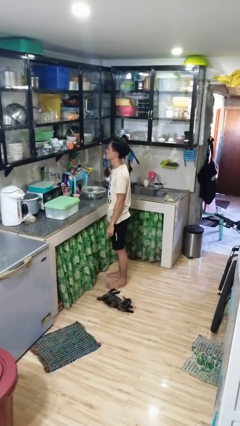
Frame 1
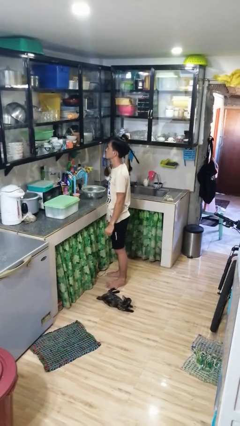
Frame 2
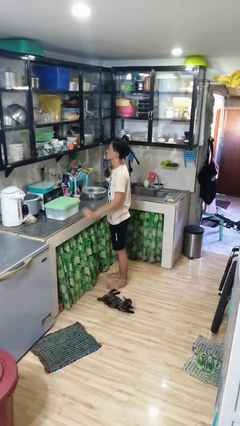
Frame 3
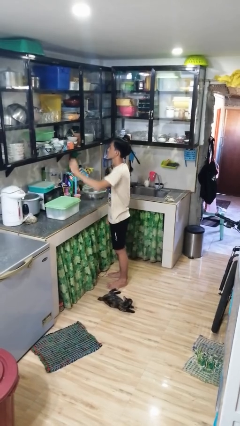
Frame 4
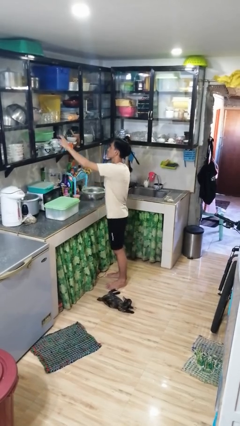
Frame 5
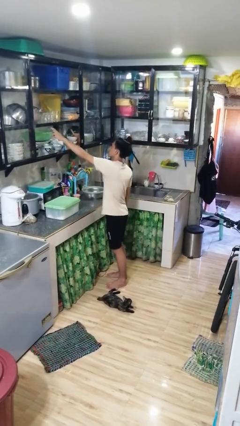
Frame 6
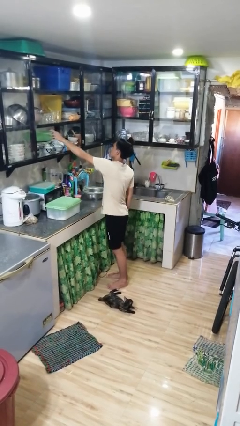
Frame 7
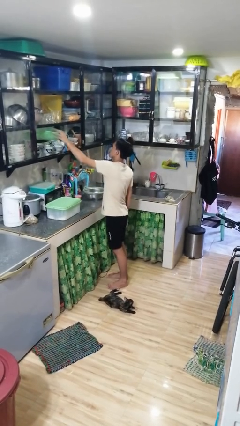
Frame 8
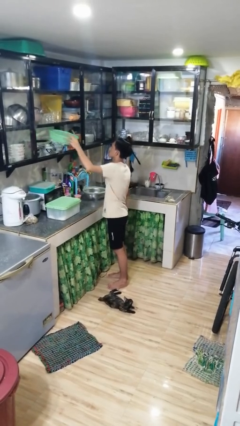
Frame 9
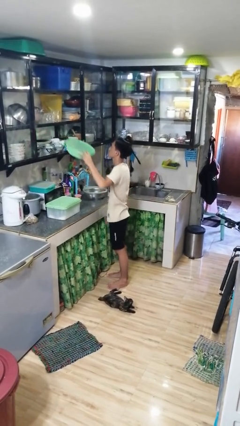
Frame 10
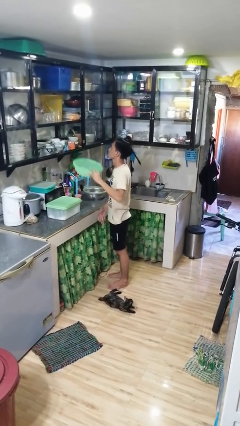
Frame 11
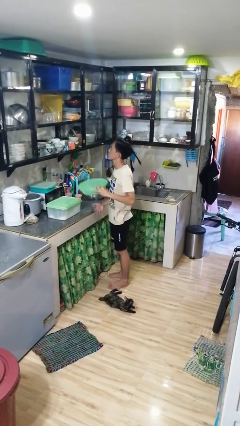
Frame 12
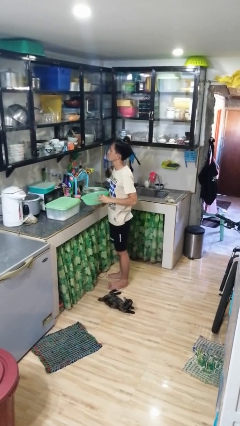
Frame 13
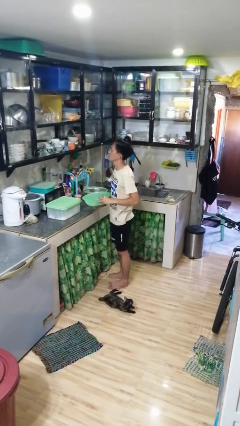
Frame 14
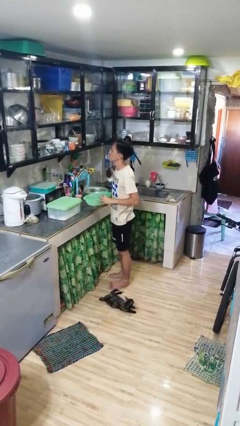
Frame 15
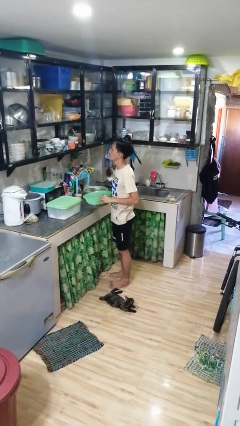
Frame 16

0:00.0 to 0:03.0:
person picks up object from cabinet

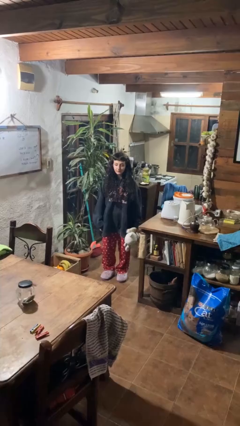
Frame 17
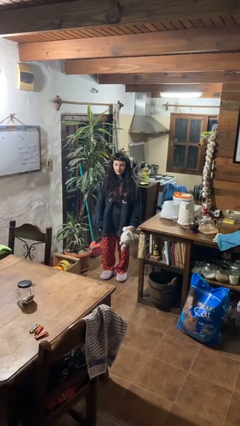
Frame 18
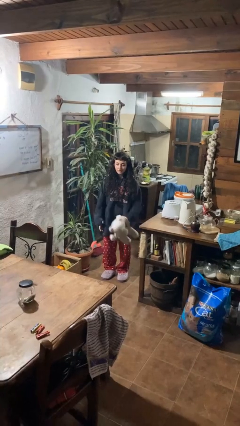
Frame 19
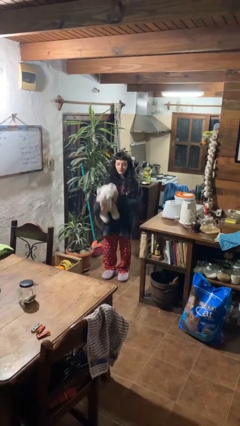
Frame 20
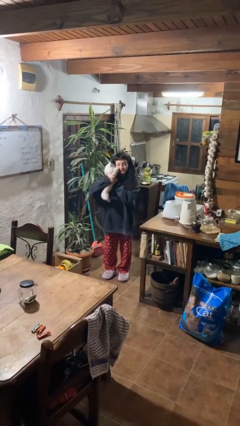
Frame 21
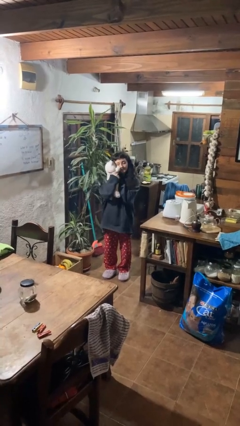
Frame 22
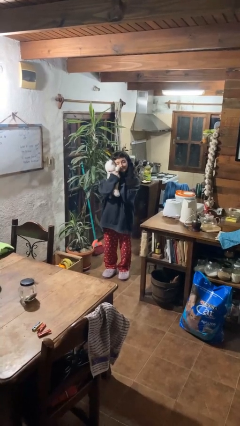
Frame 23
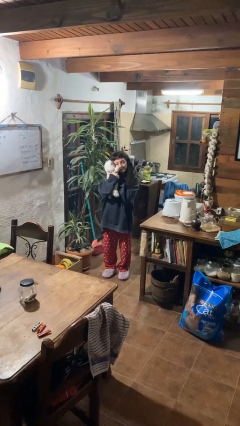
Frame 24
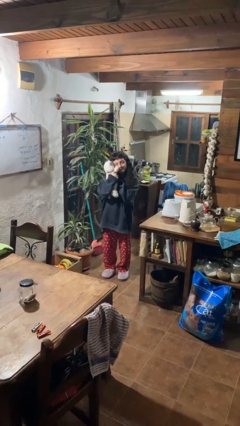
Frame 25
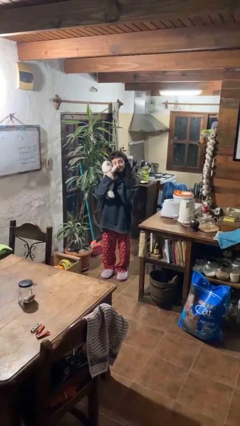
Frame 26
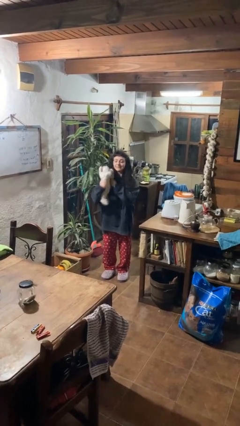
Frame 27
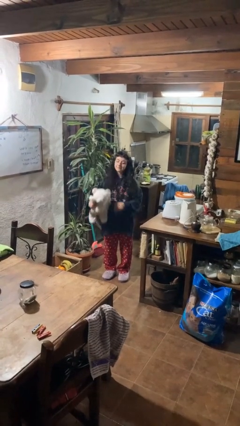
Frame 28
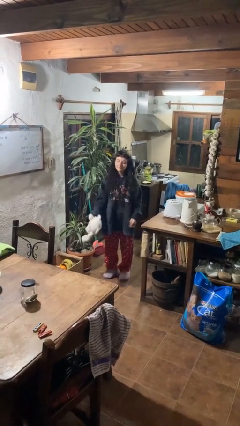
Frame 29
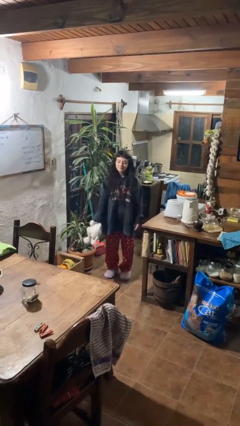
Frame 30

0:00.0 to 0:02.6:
person hugs stuffed animal

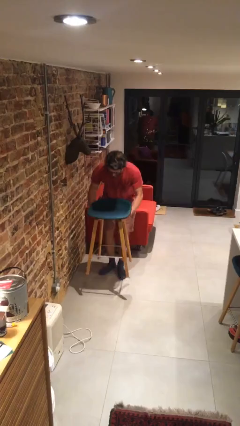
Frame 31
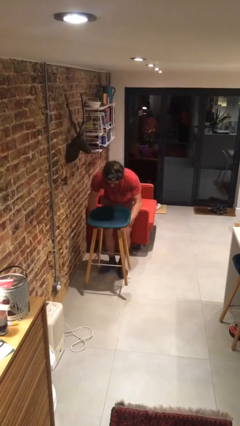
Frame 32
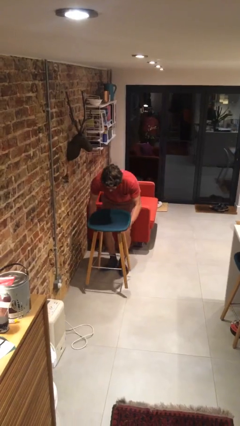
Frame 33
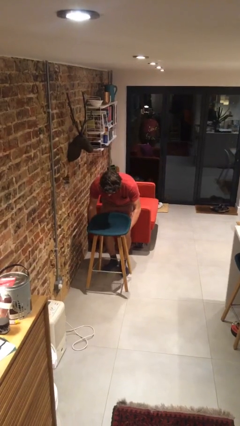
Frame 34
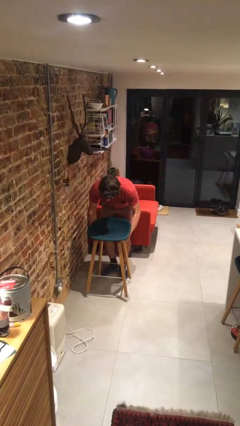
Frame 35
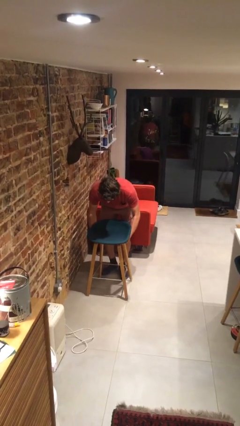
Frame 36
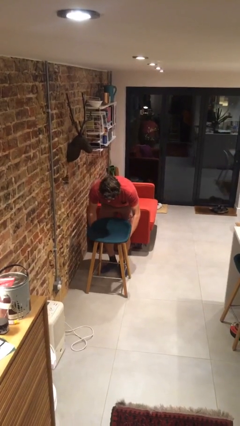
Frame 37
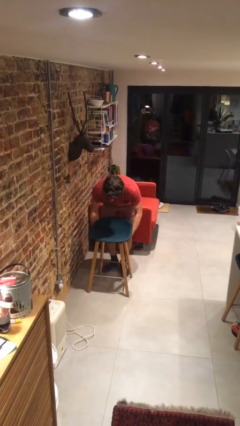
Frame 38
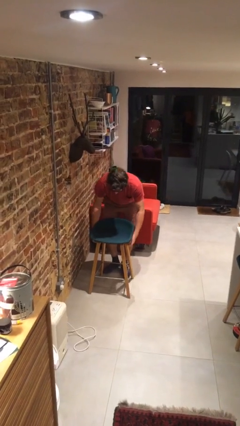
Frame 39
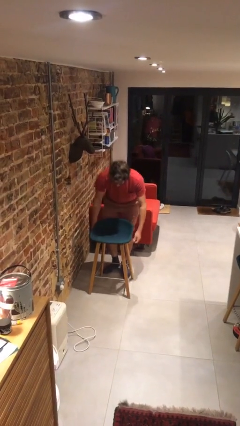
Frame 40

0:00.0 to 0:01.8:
person puts down object on floor

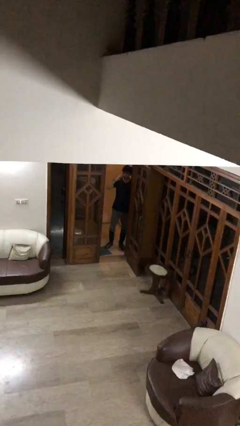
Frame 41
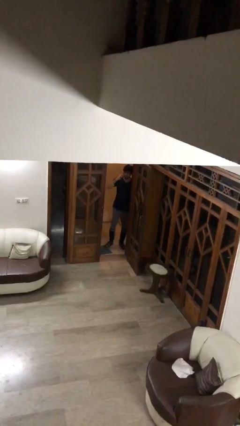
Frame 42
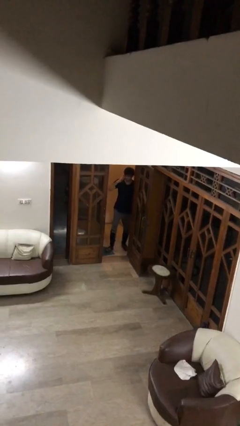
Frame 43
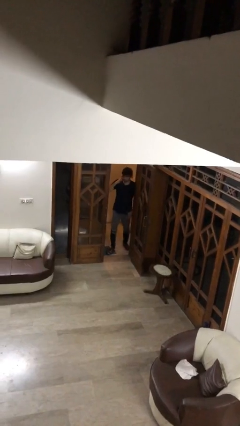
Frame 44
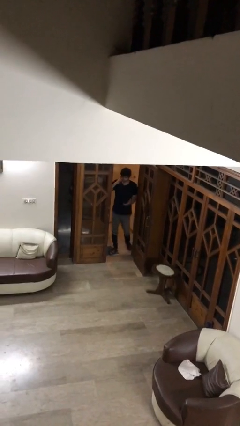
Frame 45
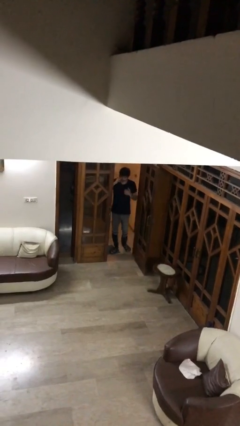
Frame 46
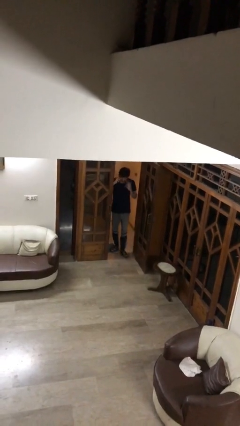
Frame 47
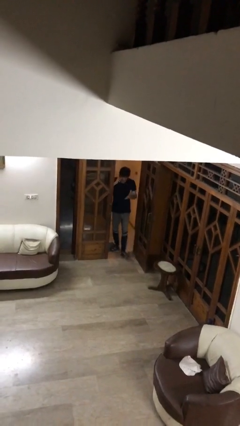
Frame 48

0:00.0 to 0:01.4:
person enters scene through structure

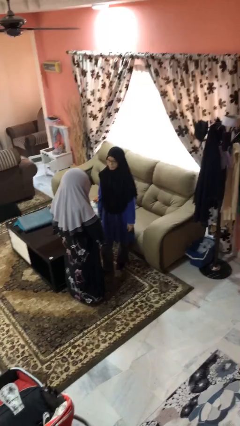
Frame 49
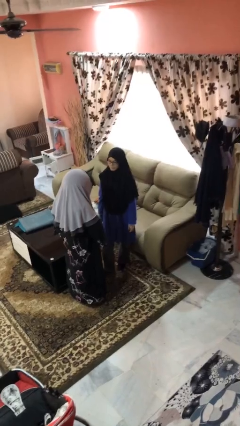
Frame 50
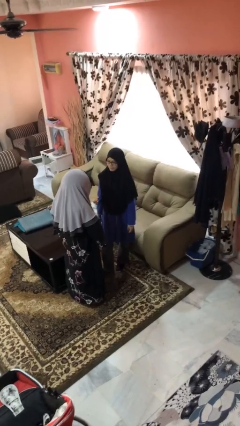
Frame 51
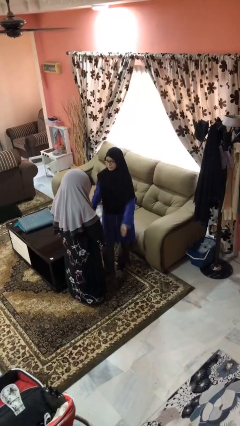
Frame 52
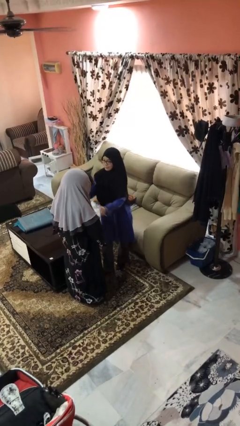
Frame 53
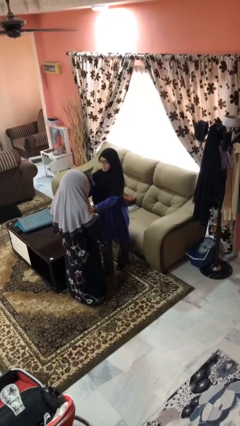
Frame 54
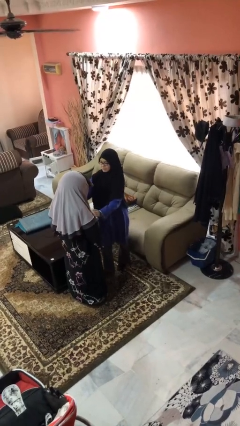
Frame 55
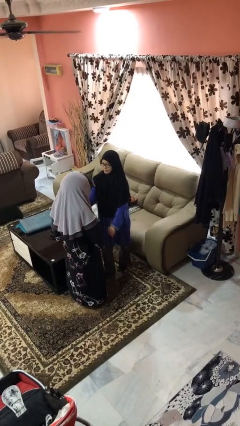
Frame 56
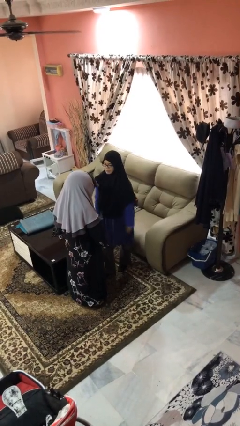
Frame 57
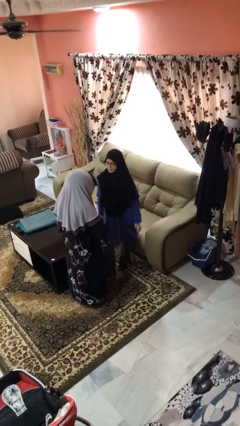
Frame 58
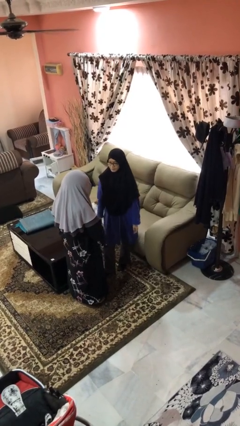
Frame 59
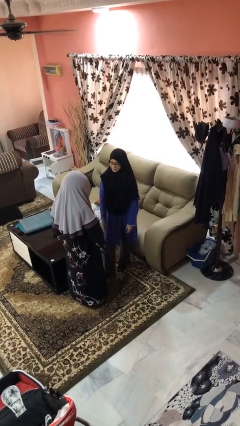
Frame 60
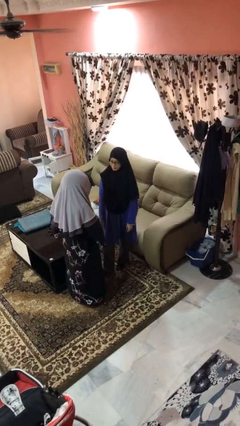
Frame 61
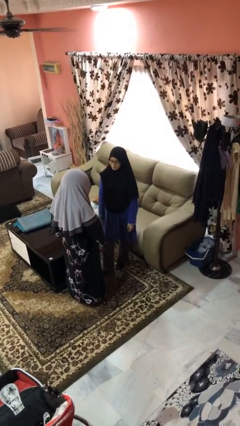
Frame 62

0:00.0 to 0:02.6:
person shoves person

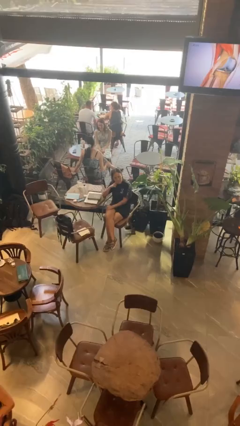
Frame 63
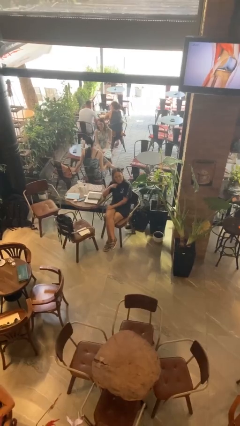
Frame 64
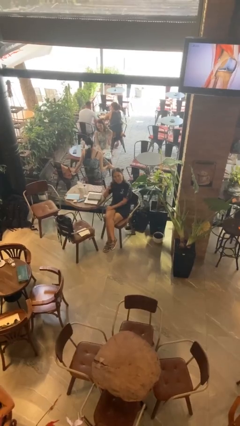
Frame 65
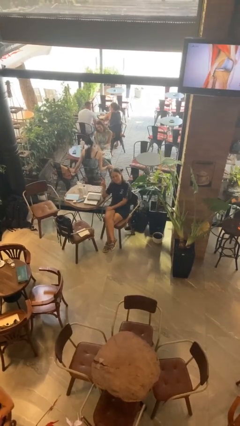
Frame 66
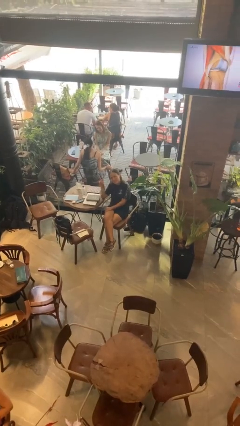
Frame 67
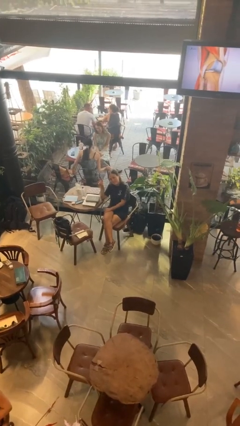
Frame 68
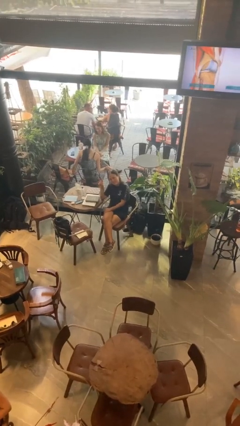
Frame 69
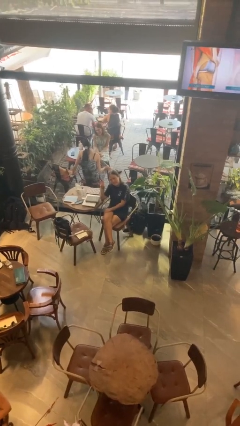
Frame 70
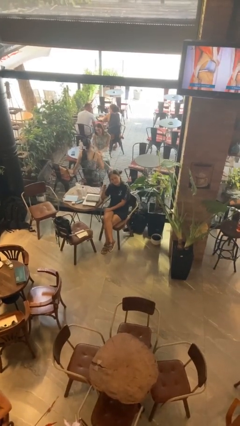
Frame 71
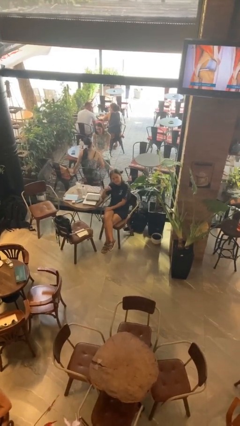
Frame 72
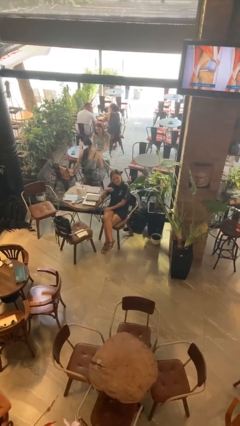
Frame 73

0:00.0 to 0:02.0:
person gestures peace

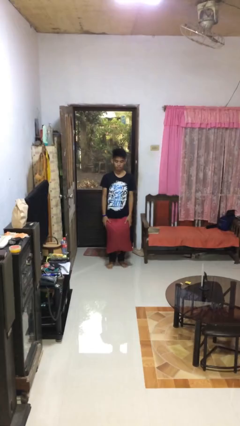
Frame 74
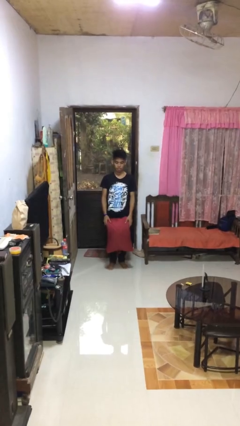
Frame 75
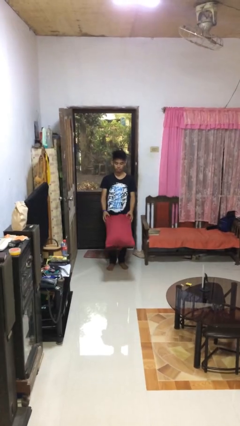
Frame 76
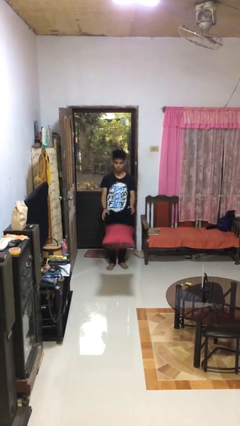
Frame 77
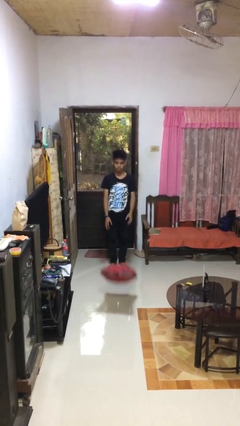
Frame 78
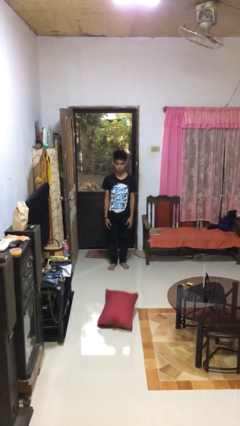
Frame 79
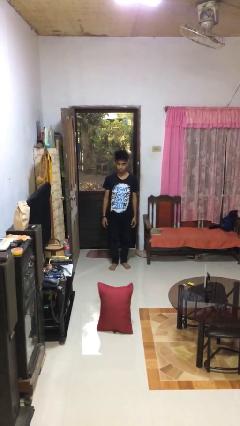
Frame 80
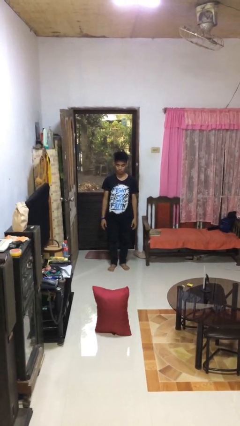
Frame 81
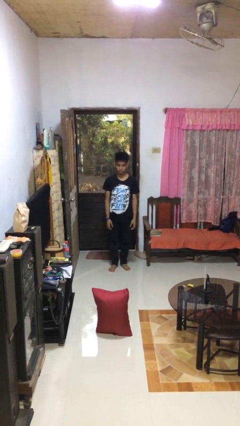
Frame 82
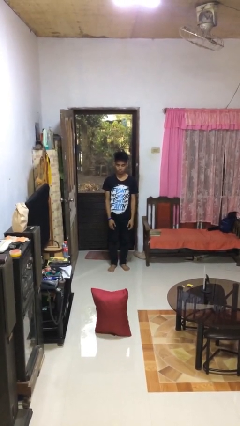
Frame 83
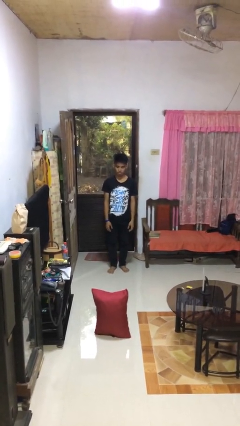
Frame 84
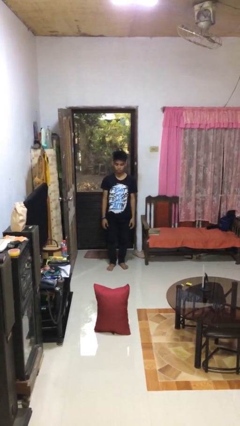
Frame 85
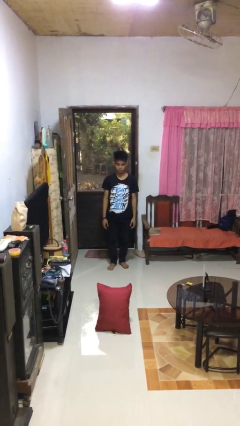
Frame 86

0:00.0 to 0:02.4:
person throws object to ground

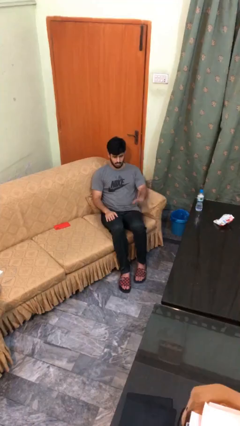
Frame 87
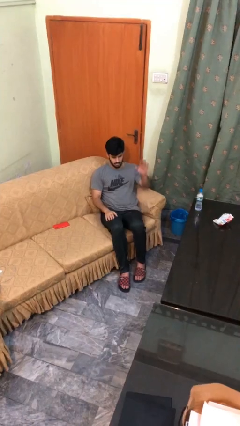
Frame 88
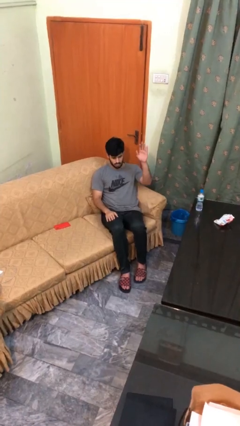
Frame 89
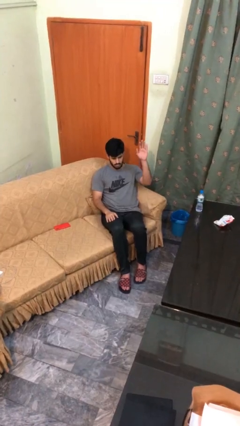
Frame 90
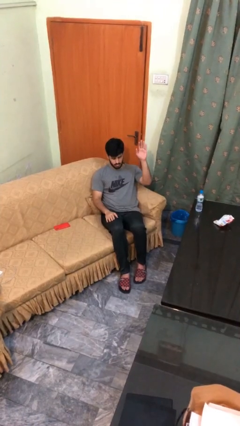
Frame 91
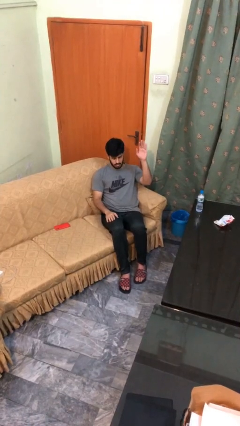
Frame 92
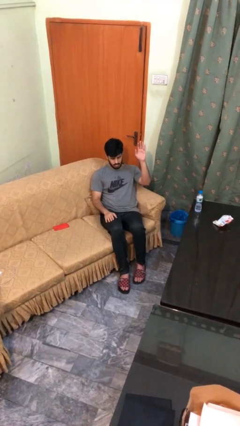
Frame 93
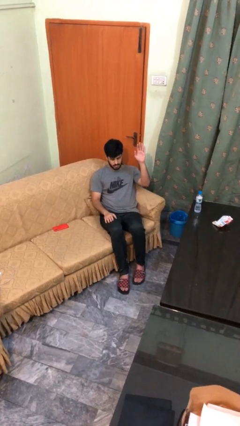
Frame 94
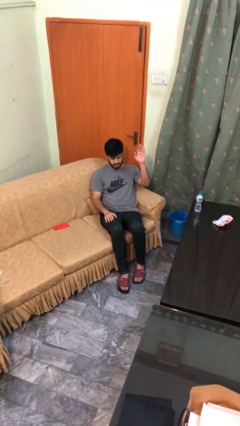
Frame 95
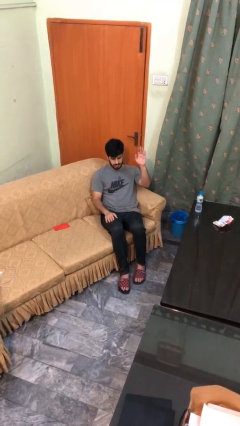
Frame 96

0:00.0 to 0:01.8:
person gestures raise hand
